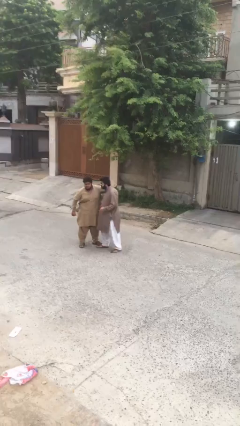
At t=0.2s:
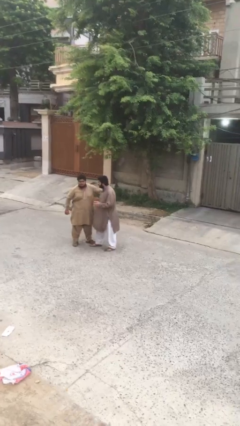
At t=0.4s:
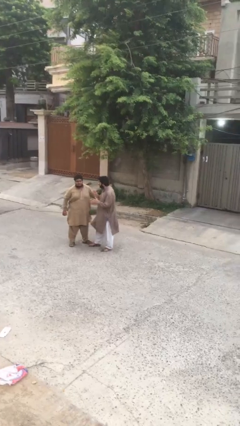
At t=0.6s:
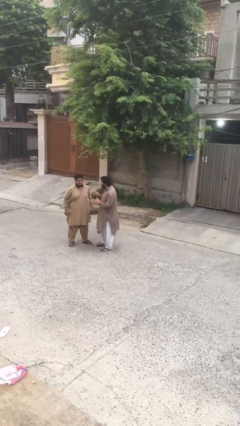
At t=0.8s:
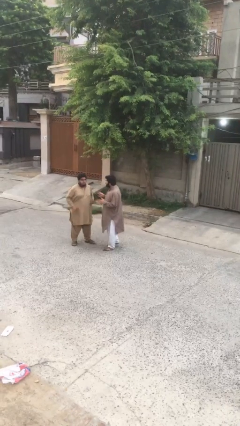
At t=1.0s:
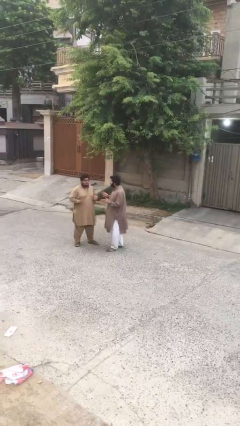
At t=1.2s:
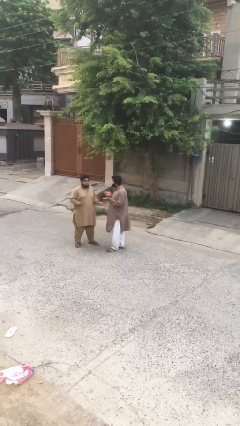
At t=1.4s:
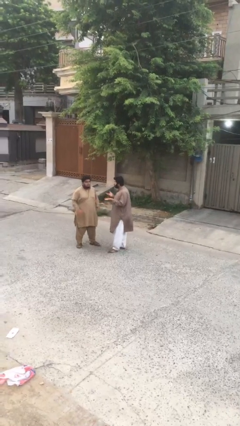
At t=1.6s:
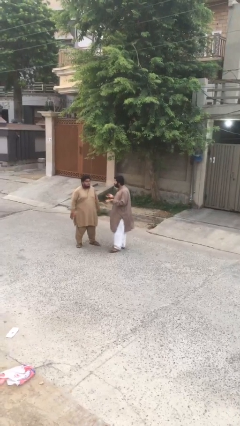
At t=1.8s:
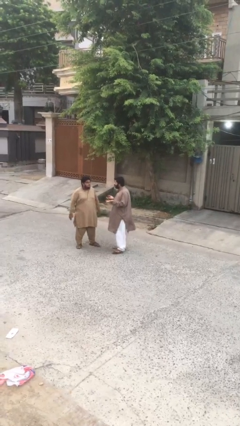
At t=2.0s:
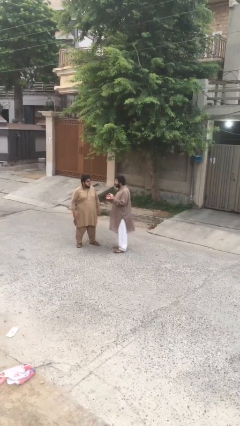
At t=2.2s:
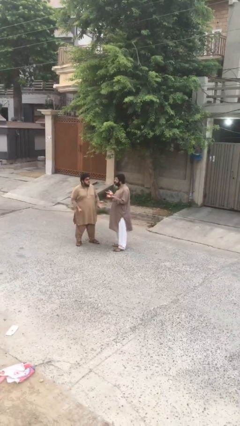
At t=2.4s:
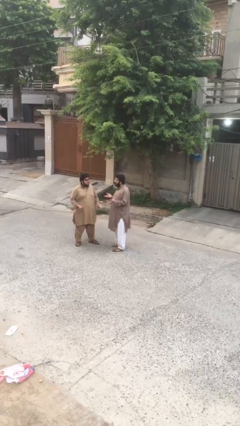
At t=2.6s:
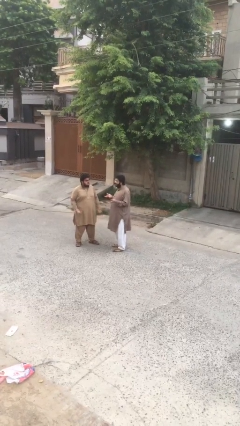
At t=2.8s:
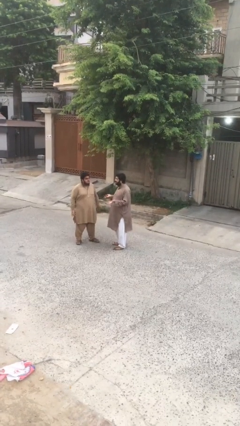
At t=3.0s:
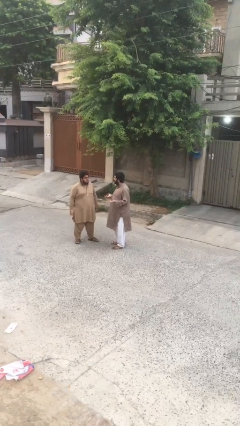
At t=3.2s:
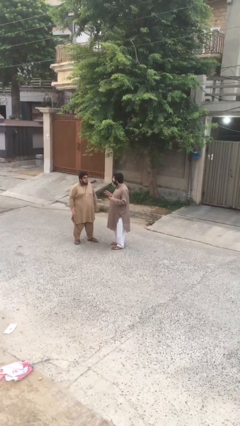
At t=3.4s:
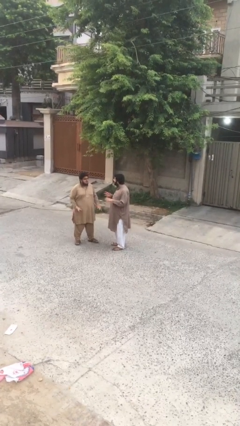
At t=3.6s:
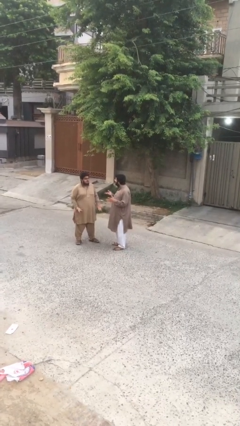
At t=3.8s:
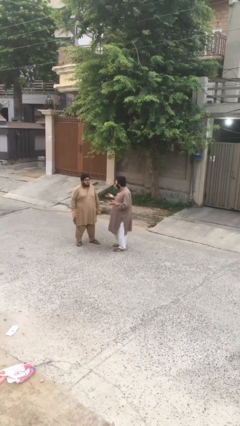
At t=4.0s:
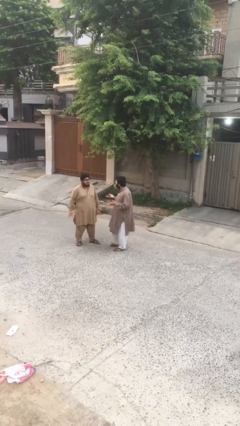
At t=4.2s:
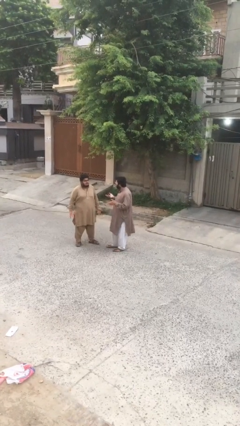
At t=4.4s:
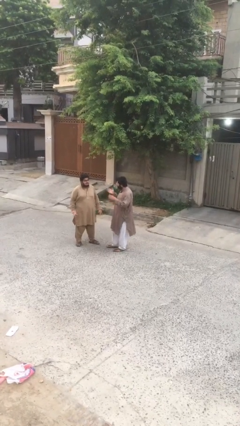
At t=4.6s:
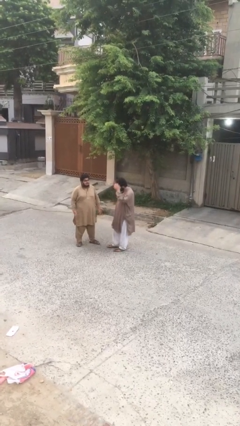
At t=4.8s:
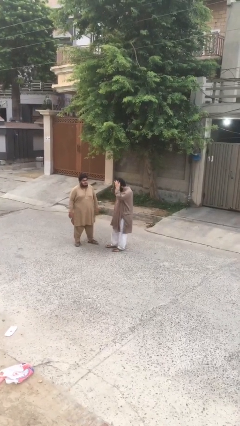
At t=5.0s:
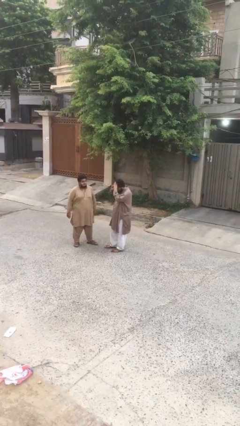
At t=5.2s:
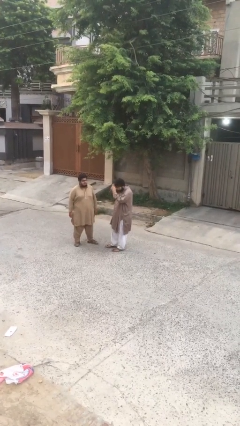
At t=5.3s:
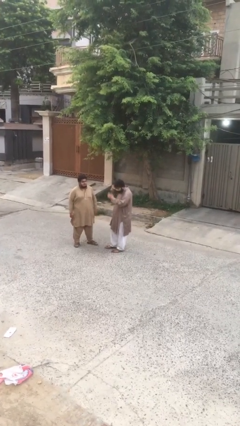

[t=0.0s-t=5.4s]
person talks to person

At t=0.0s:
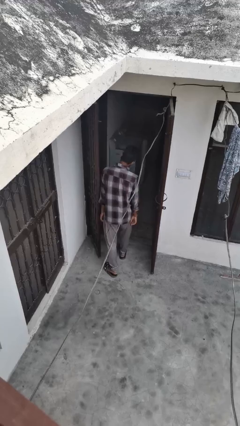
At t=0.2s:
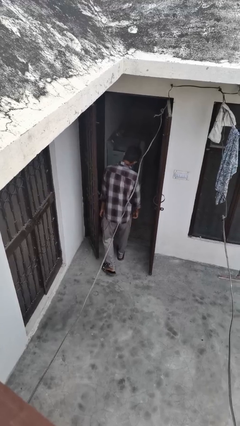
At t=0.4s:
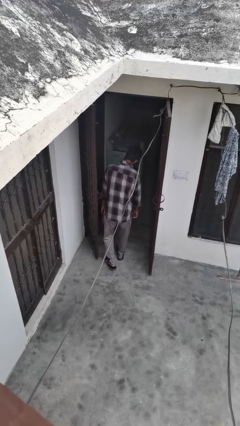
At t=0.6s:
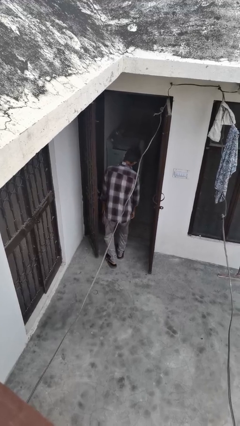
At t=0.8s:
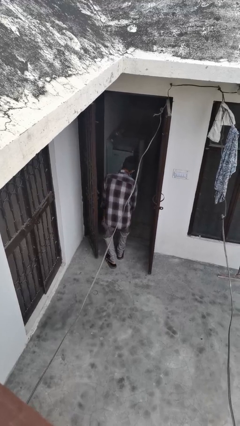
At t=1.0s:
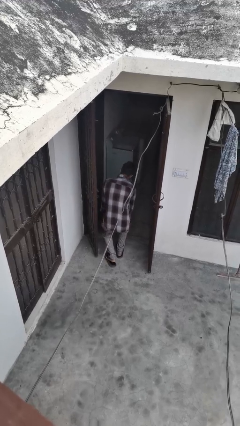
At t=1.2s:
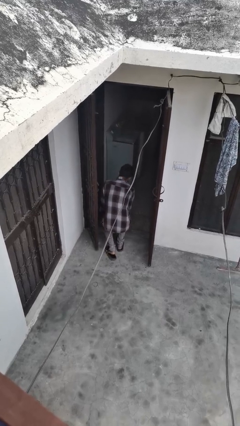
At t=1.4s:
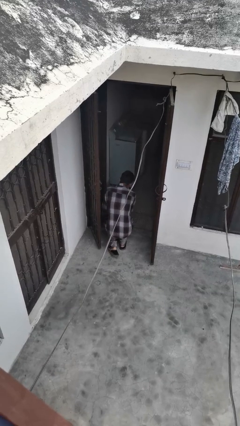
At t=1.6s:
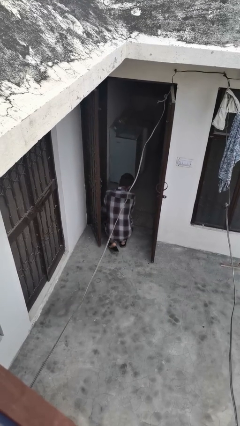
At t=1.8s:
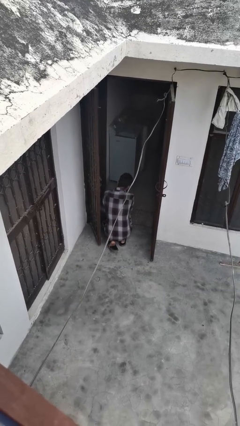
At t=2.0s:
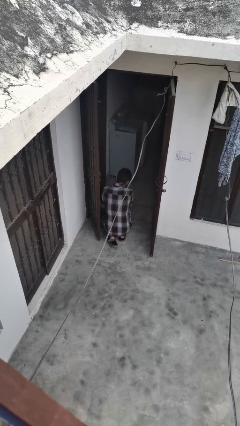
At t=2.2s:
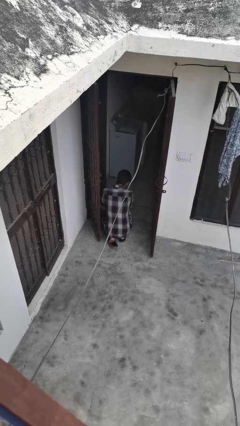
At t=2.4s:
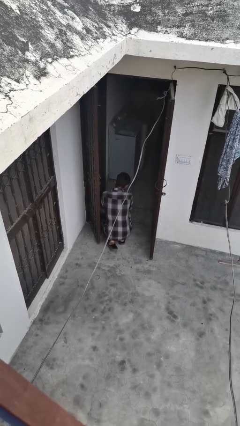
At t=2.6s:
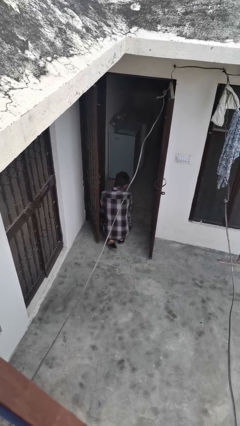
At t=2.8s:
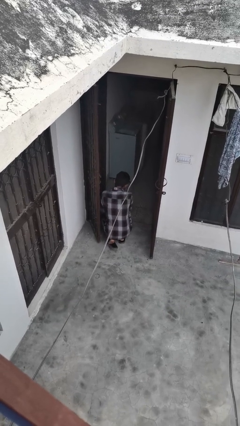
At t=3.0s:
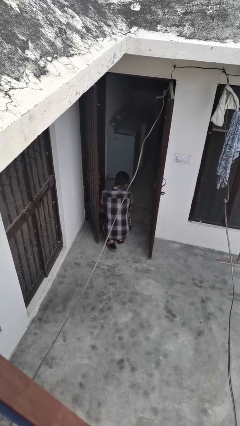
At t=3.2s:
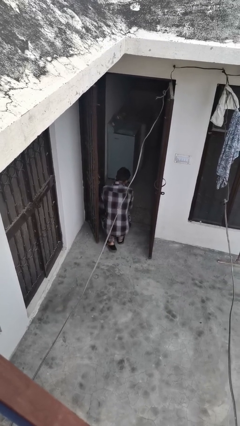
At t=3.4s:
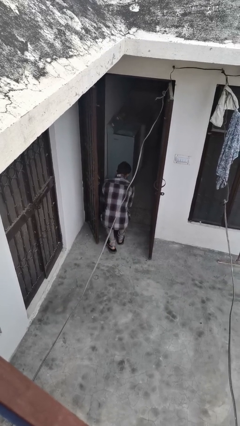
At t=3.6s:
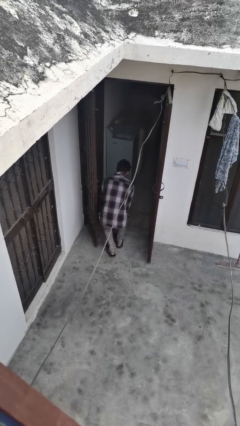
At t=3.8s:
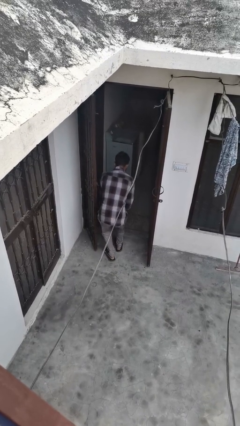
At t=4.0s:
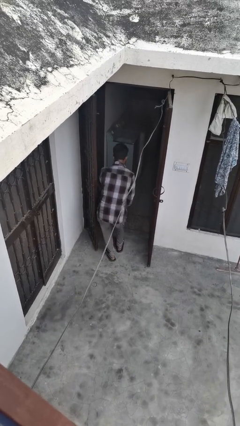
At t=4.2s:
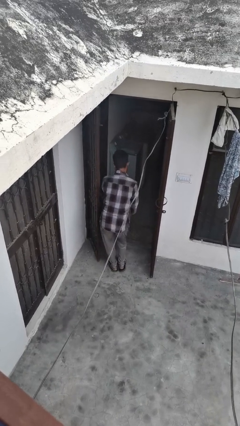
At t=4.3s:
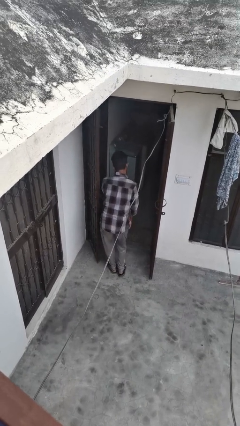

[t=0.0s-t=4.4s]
person bumps into wall

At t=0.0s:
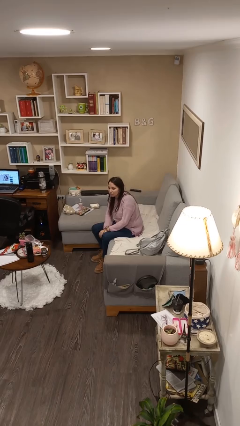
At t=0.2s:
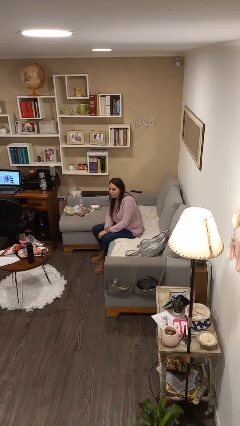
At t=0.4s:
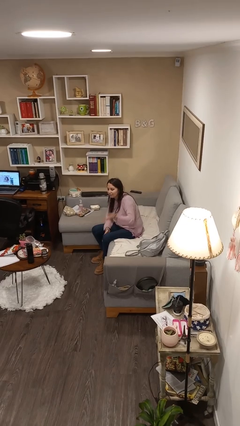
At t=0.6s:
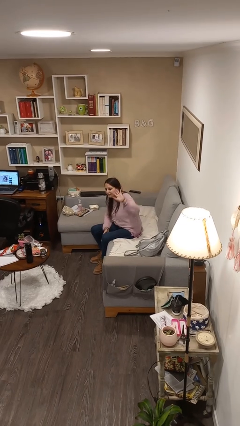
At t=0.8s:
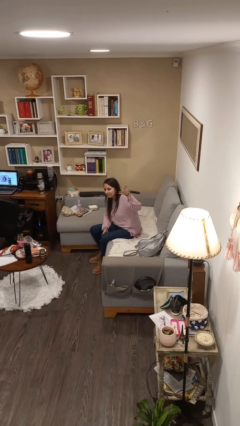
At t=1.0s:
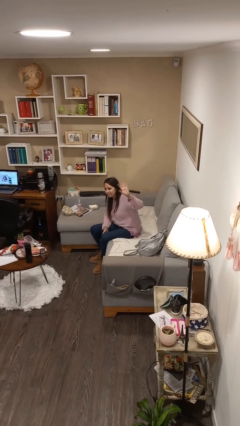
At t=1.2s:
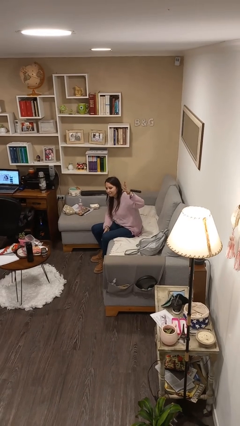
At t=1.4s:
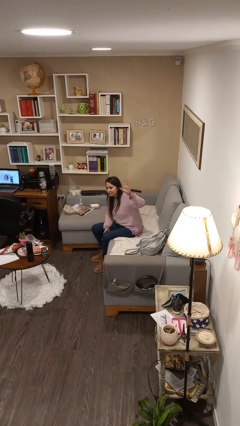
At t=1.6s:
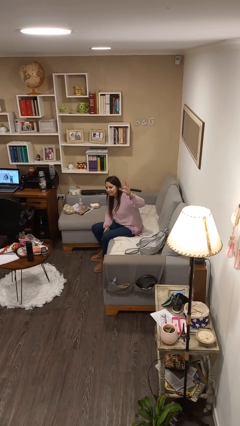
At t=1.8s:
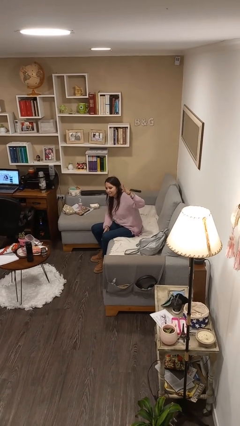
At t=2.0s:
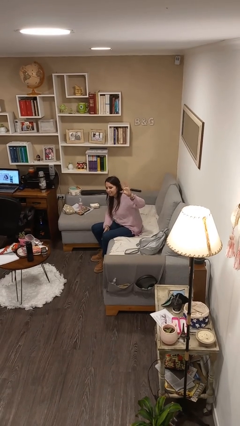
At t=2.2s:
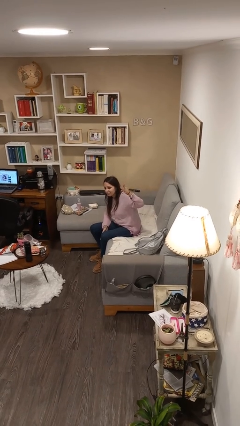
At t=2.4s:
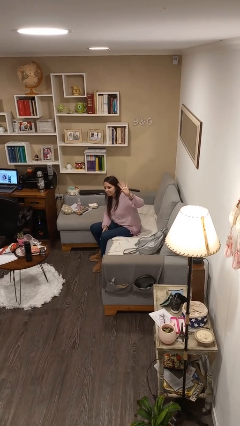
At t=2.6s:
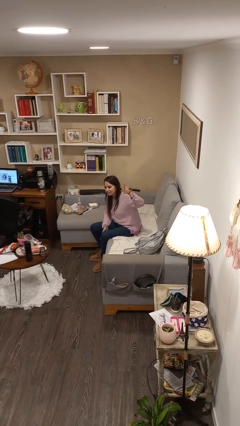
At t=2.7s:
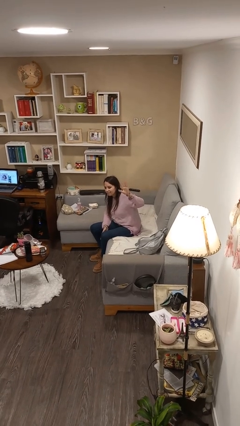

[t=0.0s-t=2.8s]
person waves at person

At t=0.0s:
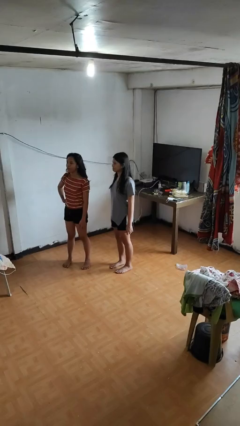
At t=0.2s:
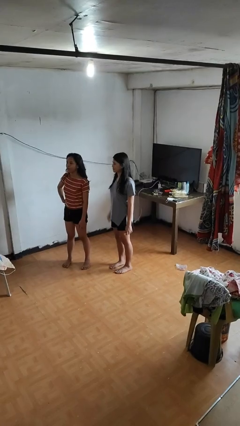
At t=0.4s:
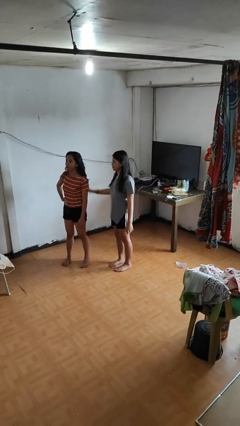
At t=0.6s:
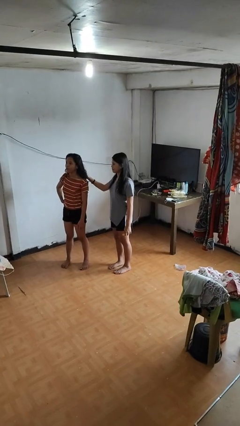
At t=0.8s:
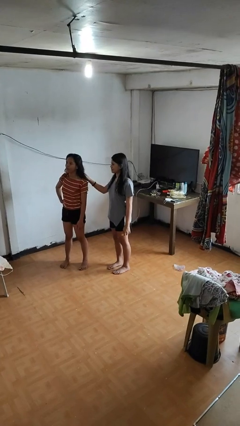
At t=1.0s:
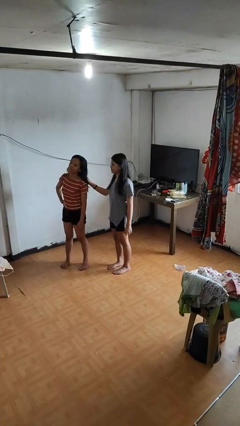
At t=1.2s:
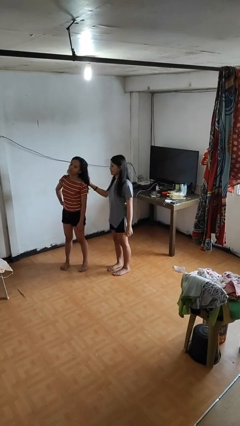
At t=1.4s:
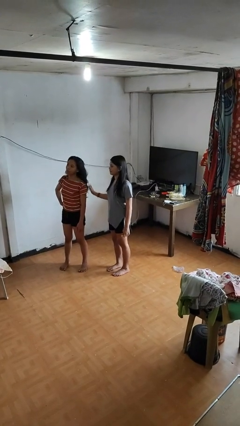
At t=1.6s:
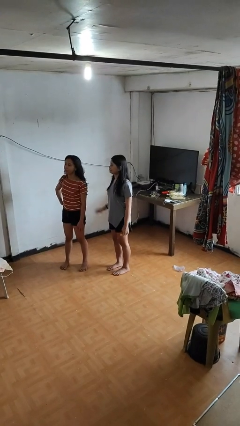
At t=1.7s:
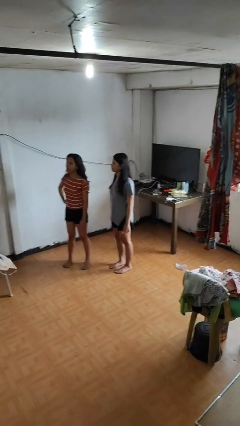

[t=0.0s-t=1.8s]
person grabs person by hair

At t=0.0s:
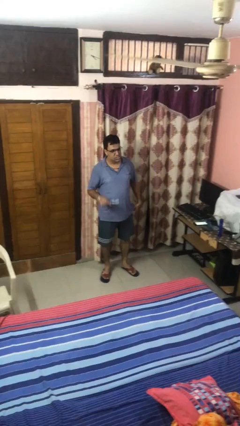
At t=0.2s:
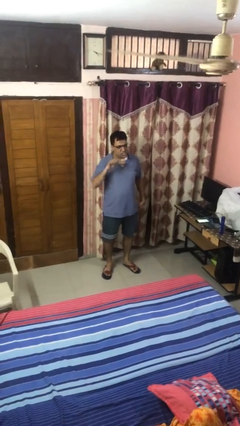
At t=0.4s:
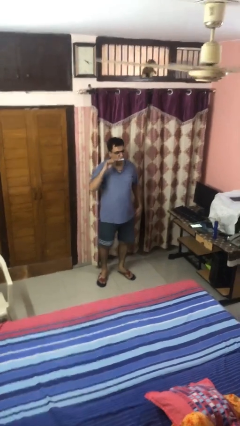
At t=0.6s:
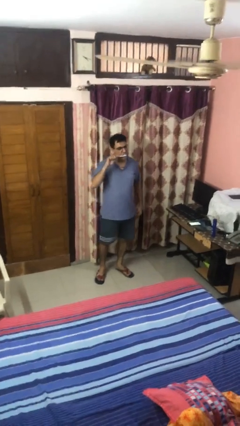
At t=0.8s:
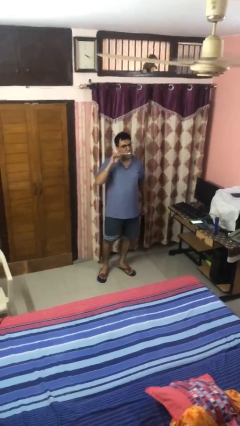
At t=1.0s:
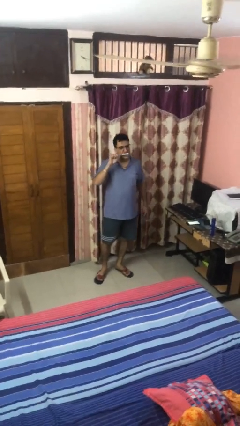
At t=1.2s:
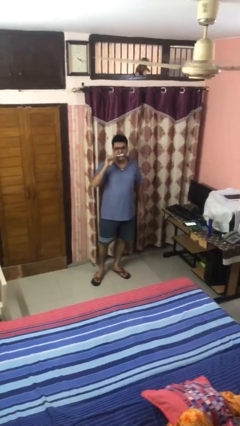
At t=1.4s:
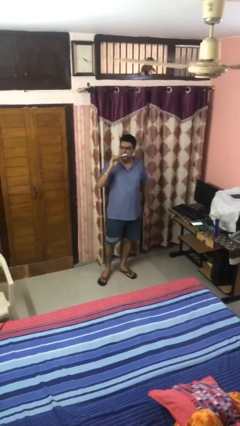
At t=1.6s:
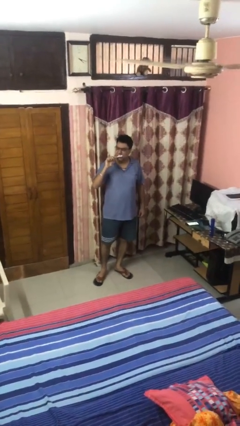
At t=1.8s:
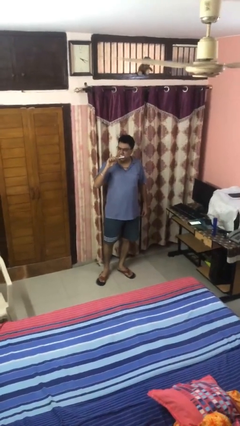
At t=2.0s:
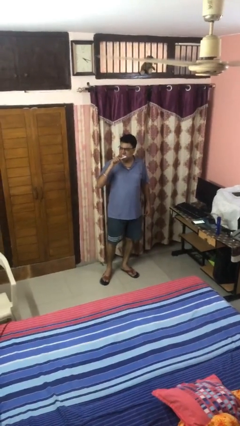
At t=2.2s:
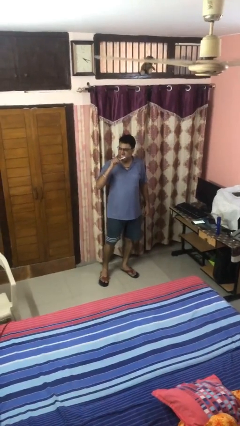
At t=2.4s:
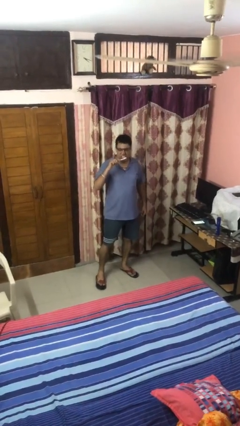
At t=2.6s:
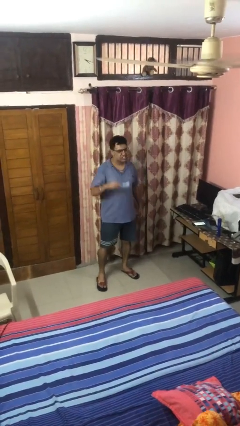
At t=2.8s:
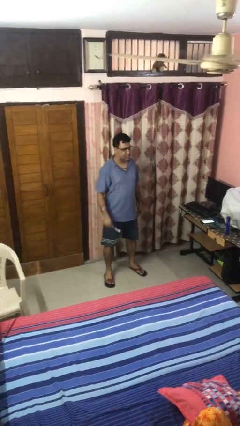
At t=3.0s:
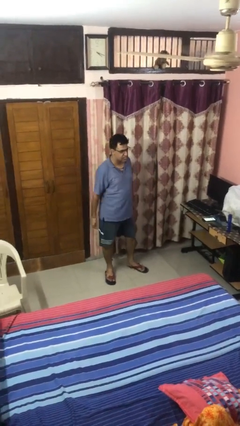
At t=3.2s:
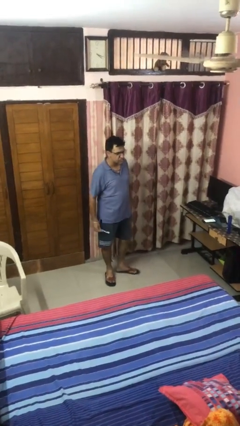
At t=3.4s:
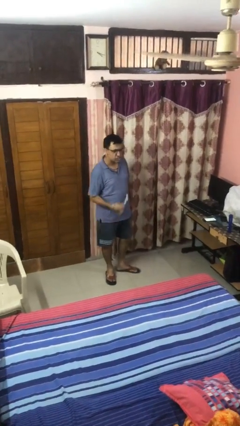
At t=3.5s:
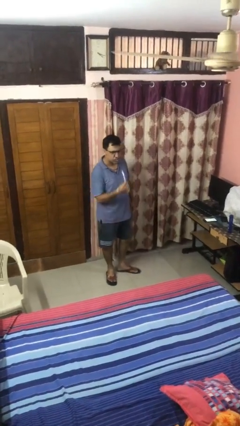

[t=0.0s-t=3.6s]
person brushes teeth
